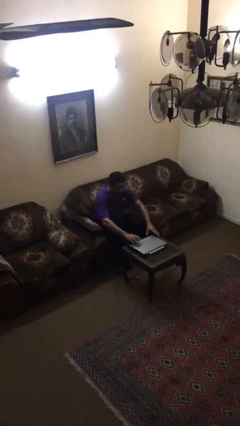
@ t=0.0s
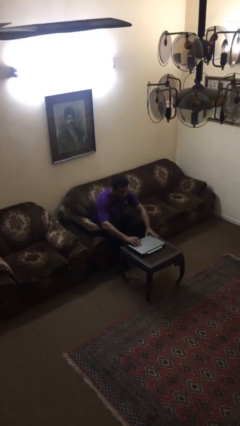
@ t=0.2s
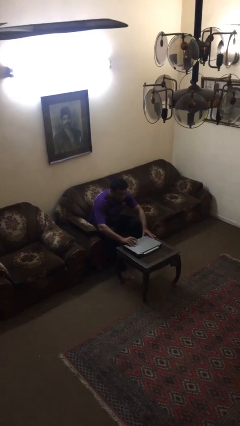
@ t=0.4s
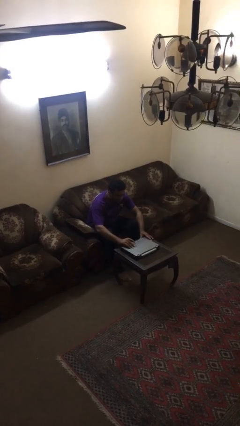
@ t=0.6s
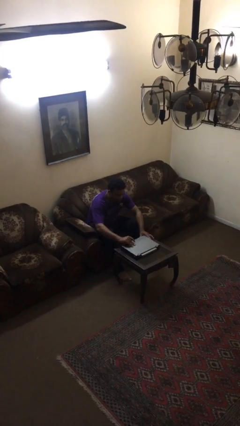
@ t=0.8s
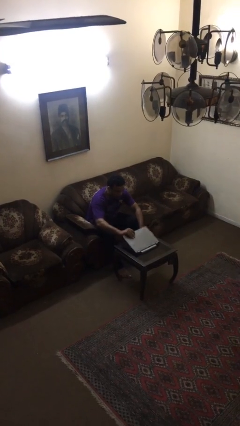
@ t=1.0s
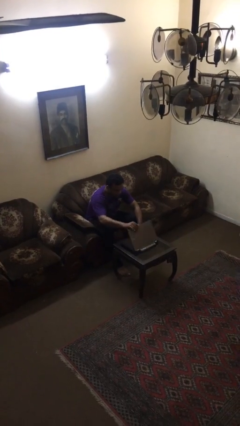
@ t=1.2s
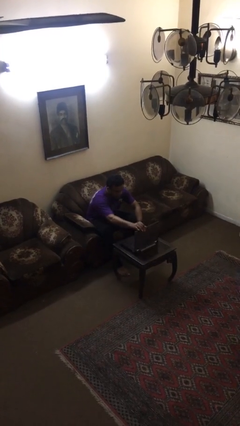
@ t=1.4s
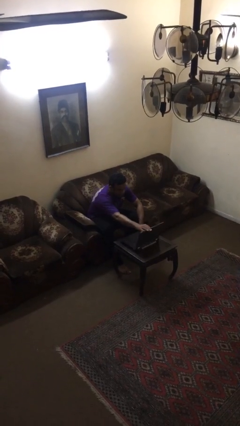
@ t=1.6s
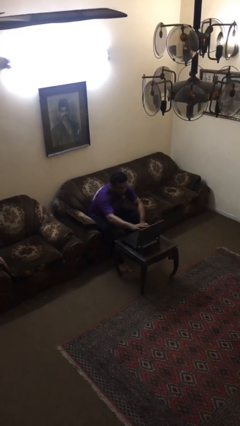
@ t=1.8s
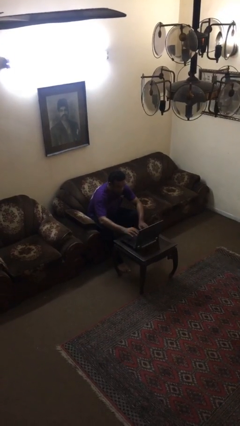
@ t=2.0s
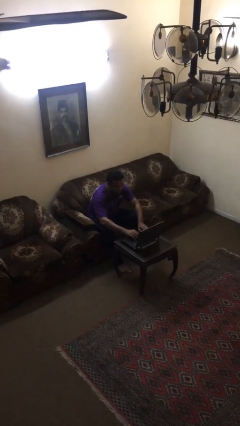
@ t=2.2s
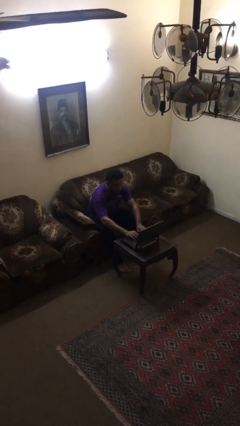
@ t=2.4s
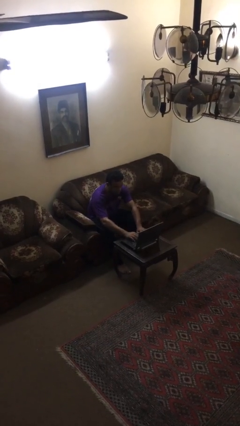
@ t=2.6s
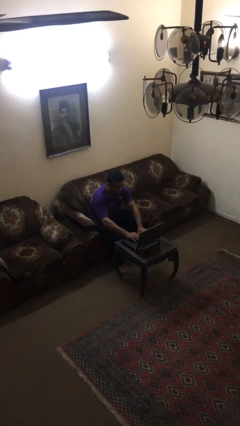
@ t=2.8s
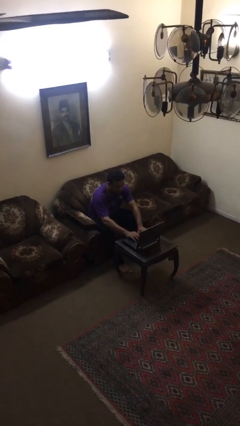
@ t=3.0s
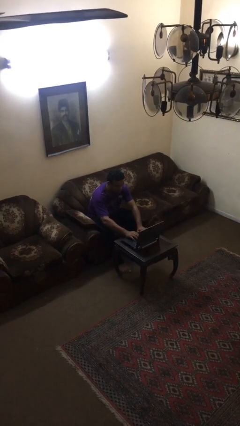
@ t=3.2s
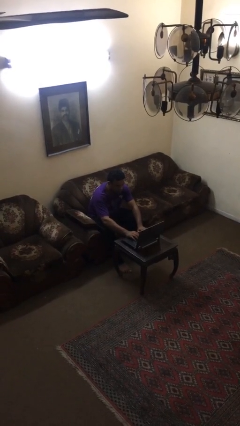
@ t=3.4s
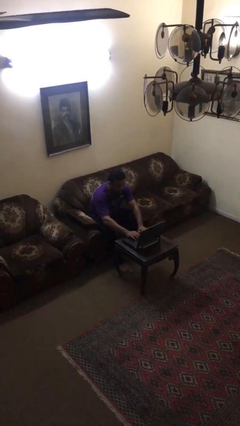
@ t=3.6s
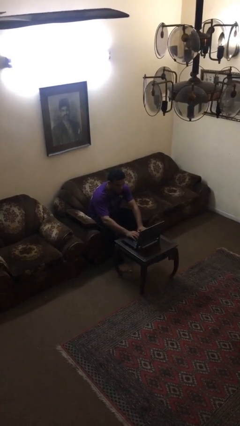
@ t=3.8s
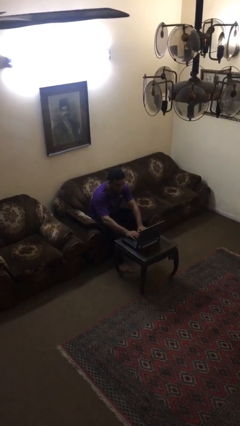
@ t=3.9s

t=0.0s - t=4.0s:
person interacts with laptop

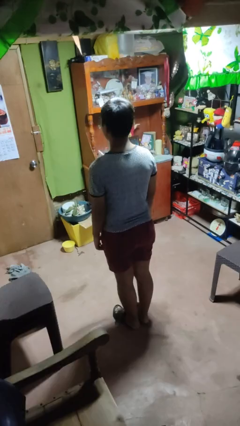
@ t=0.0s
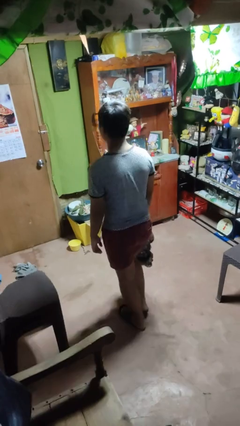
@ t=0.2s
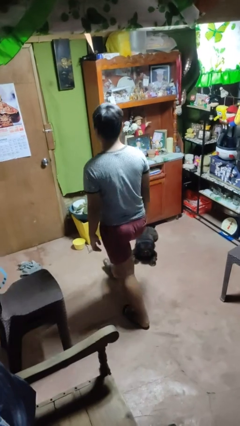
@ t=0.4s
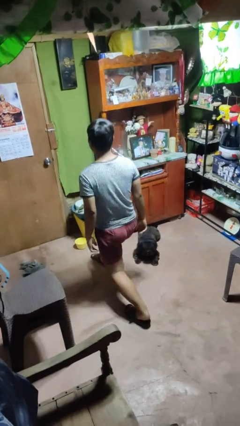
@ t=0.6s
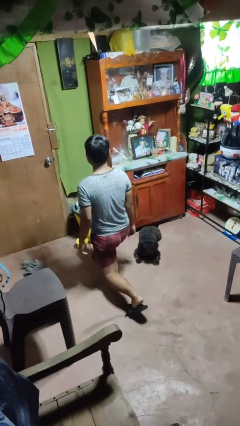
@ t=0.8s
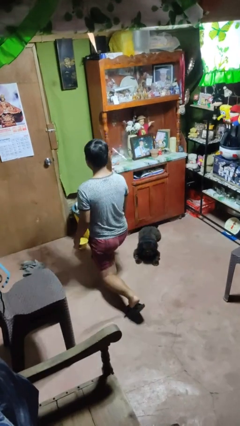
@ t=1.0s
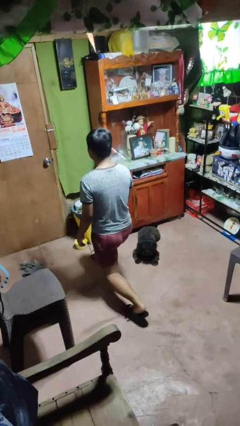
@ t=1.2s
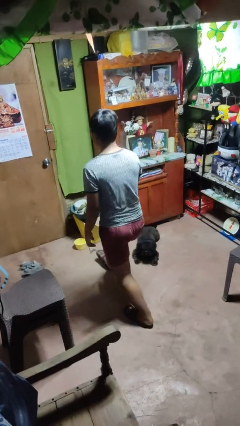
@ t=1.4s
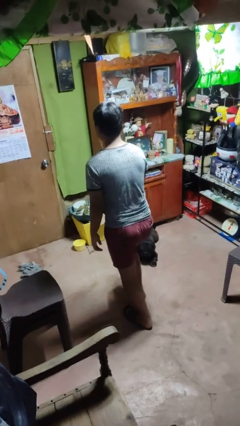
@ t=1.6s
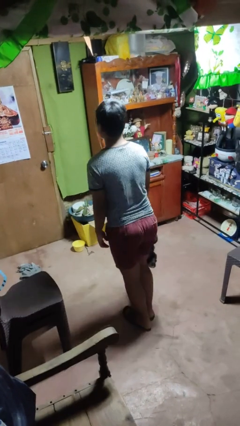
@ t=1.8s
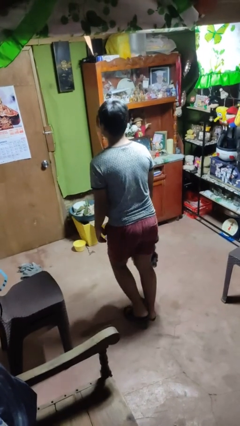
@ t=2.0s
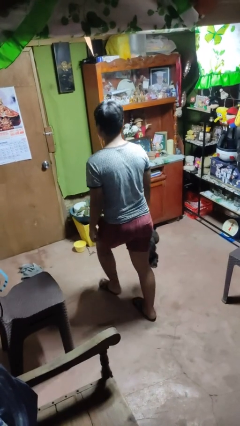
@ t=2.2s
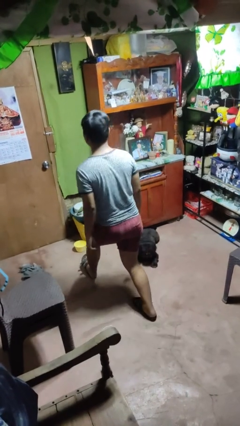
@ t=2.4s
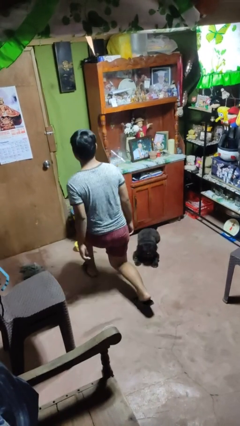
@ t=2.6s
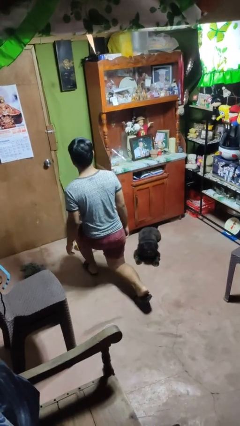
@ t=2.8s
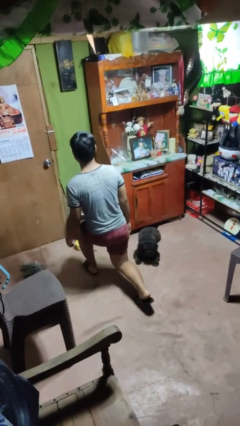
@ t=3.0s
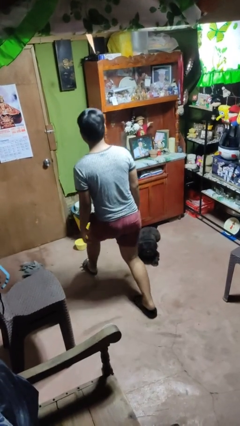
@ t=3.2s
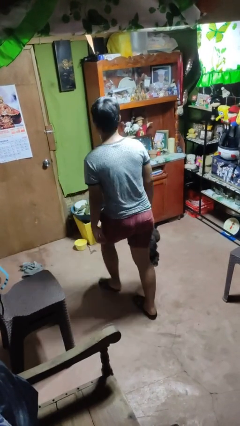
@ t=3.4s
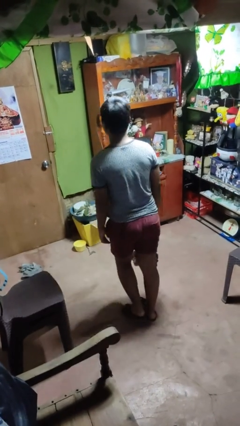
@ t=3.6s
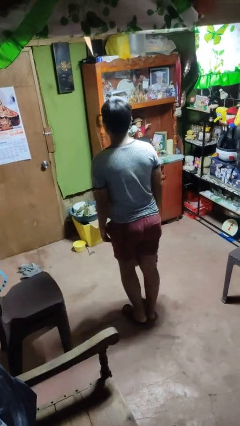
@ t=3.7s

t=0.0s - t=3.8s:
person exercises with lunges

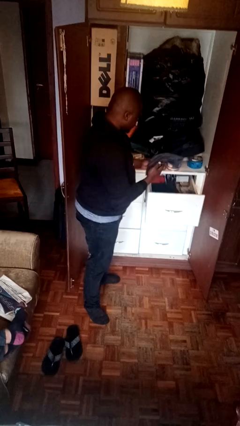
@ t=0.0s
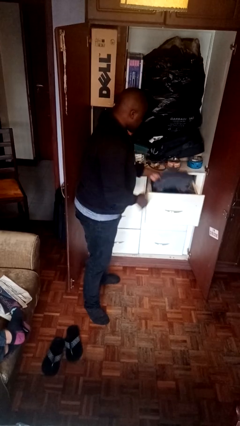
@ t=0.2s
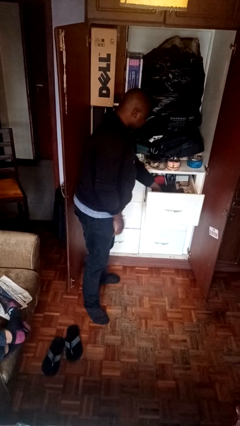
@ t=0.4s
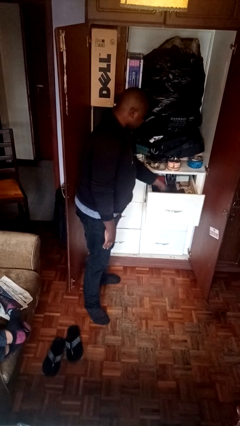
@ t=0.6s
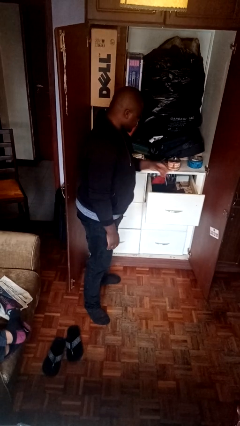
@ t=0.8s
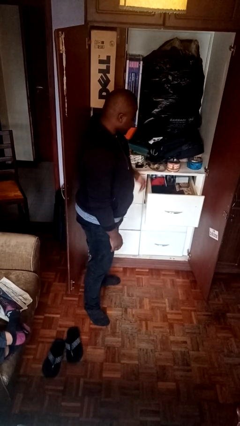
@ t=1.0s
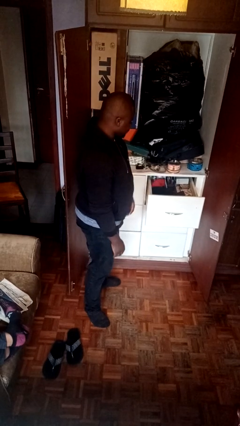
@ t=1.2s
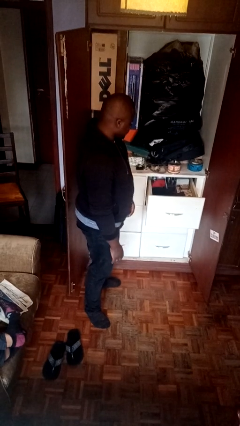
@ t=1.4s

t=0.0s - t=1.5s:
person puts clothes into dresser

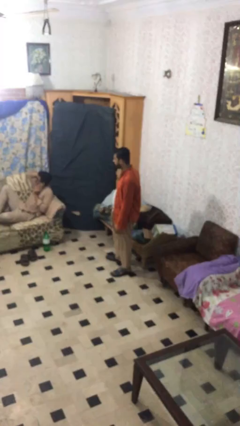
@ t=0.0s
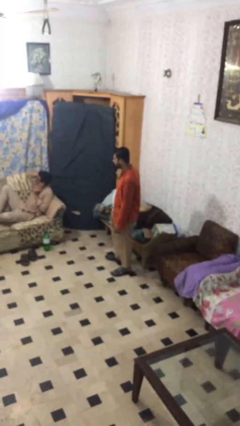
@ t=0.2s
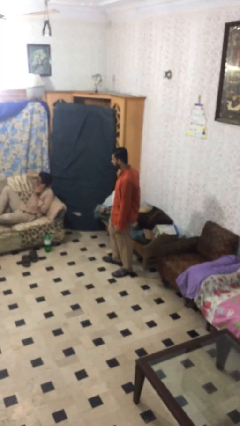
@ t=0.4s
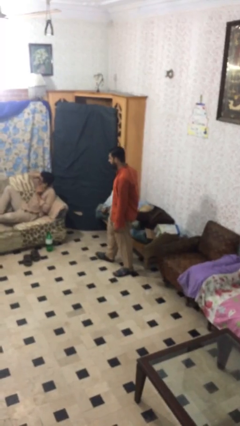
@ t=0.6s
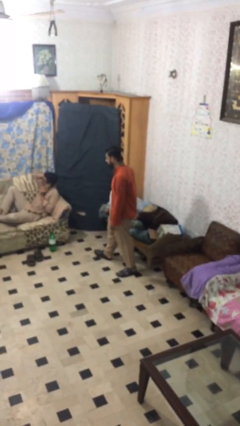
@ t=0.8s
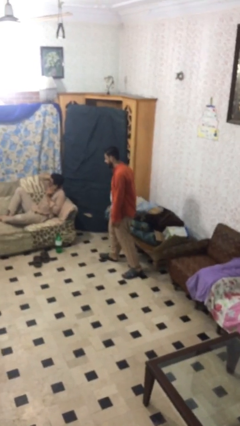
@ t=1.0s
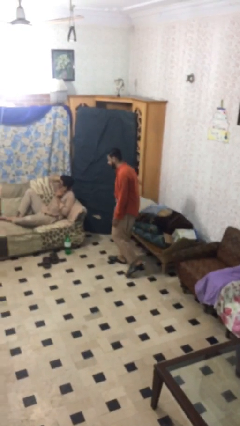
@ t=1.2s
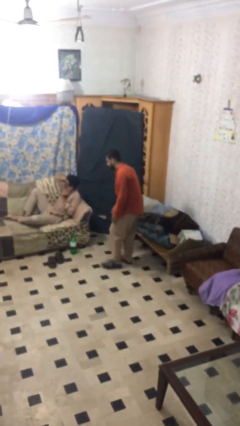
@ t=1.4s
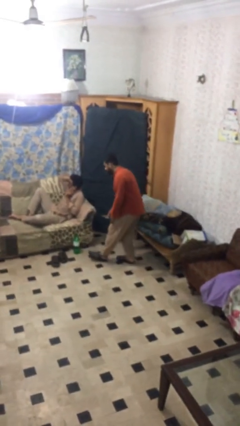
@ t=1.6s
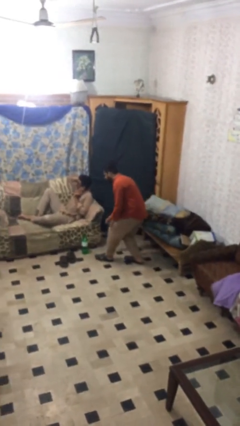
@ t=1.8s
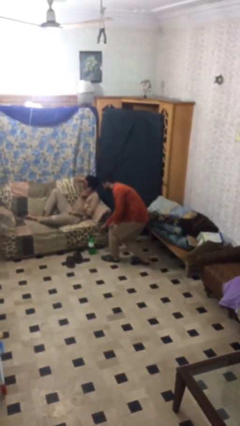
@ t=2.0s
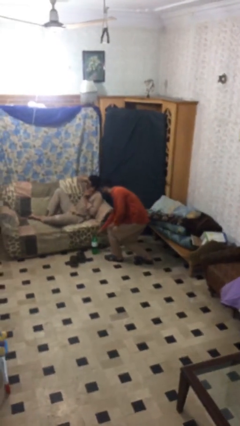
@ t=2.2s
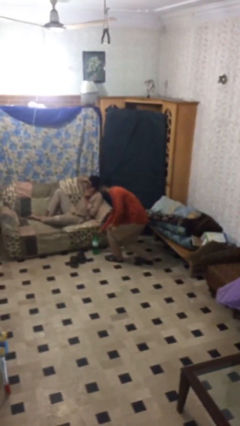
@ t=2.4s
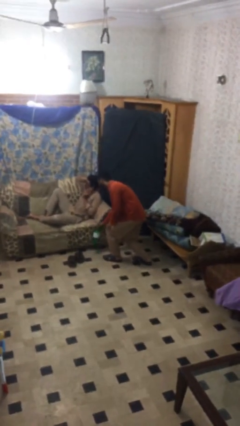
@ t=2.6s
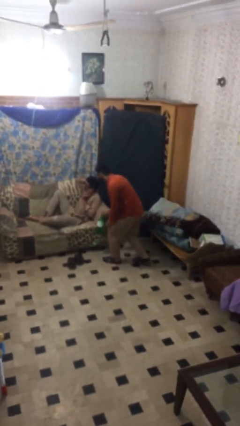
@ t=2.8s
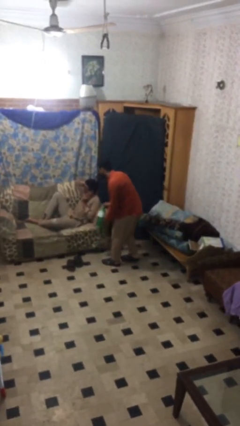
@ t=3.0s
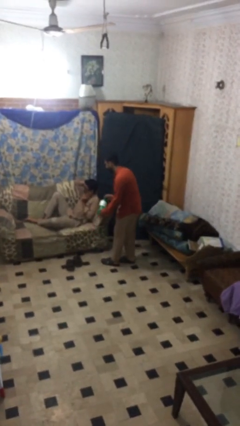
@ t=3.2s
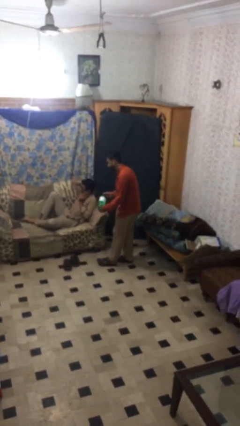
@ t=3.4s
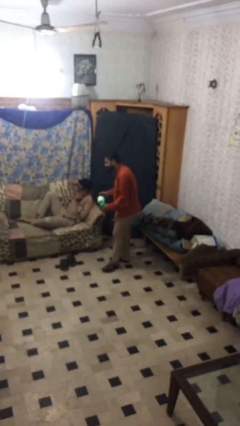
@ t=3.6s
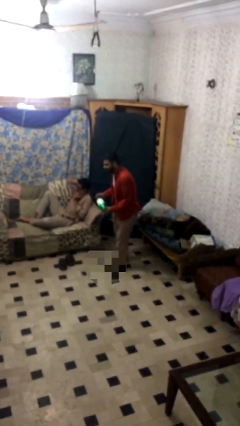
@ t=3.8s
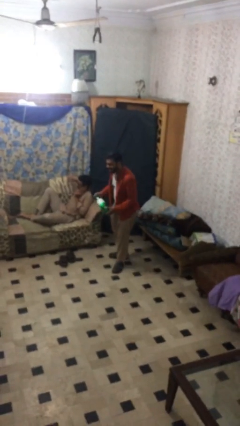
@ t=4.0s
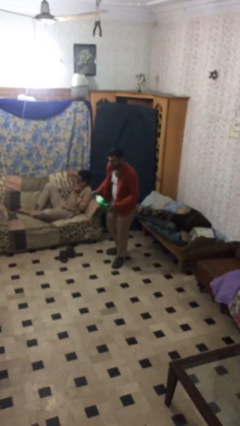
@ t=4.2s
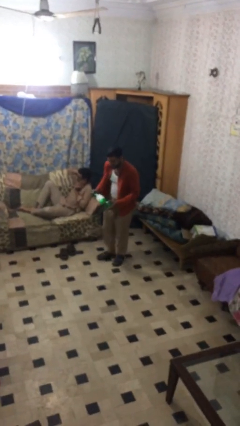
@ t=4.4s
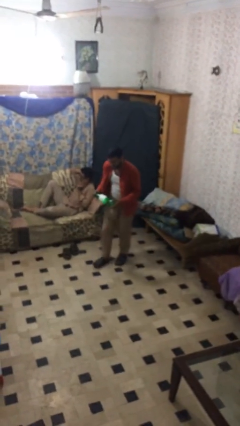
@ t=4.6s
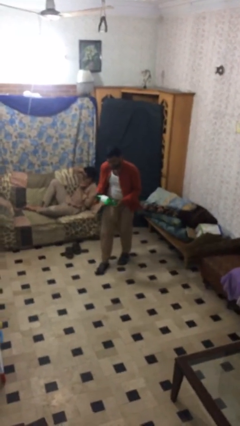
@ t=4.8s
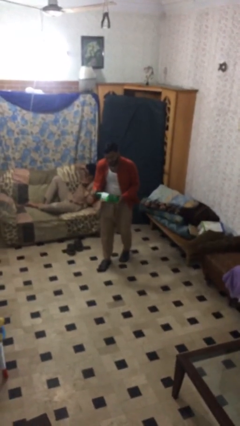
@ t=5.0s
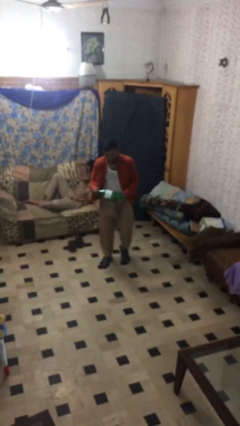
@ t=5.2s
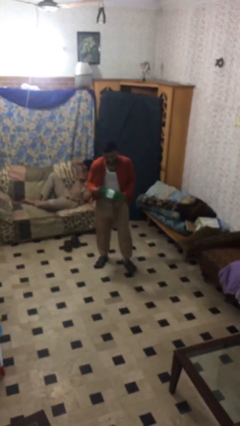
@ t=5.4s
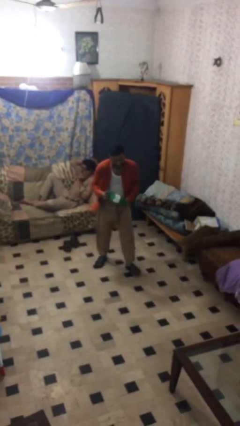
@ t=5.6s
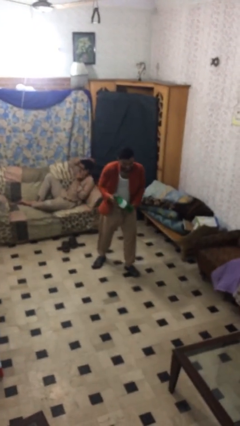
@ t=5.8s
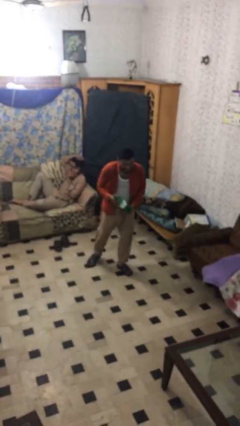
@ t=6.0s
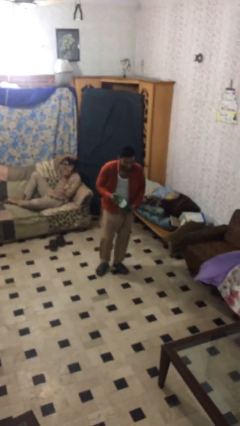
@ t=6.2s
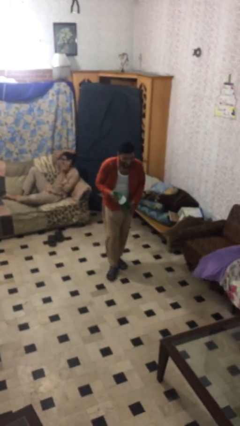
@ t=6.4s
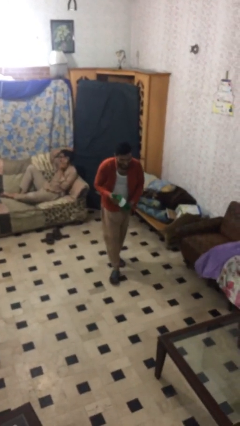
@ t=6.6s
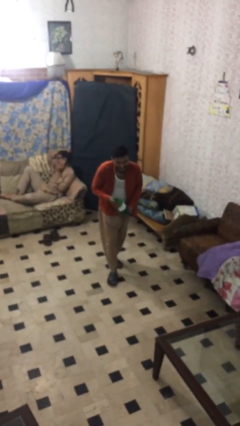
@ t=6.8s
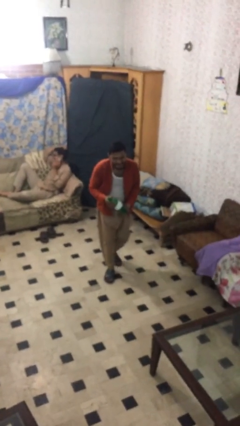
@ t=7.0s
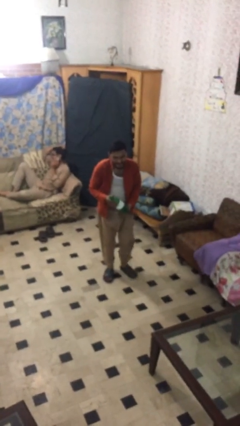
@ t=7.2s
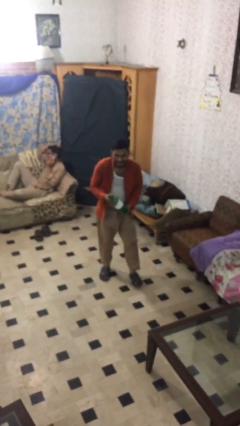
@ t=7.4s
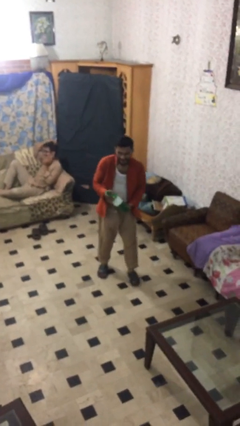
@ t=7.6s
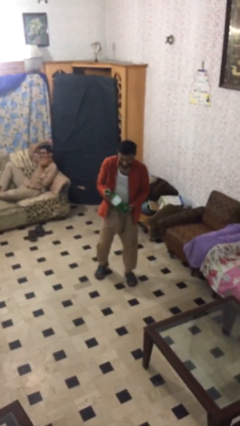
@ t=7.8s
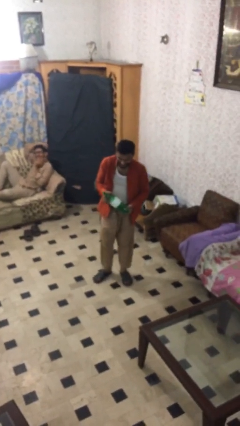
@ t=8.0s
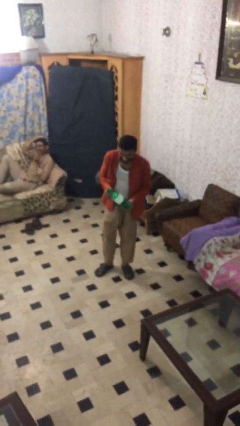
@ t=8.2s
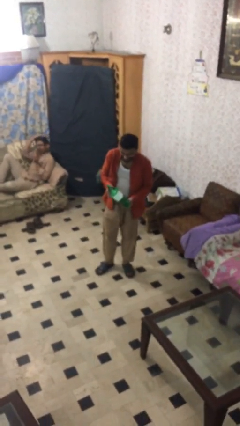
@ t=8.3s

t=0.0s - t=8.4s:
person steals object from person

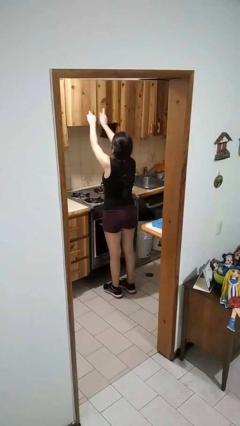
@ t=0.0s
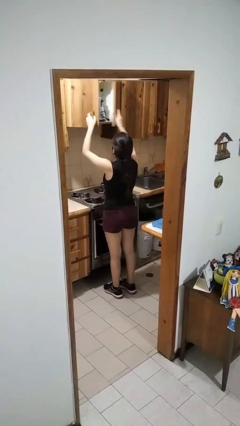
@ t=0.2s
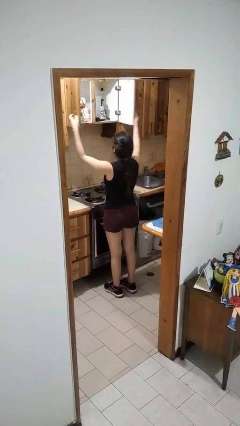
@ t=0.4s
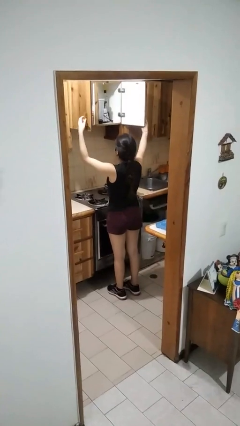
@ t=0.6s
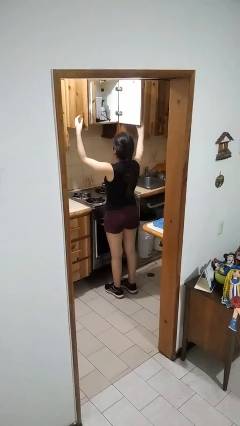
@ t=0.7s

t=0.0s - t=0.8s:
person opens cabinet
